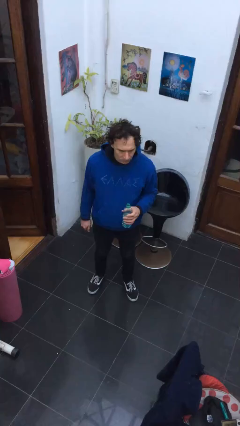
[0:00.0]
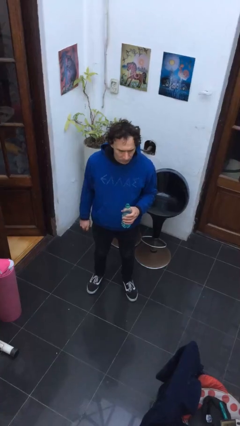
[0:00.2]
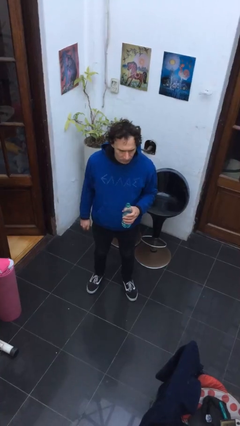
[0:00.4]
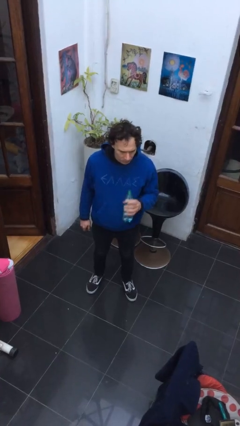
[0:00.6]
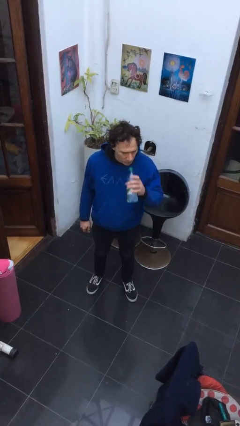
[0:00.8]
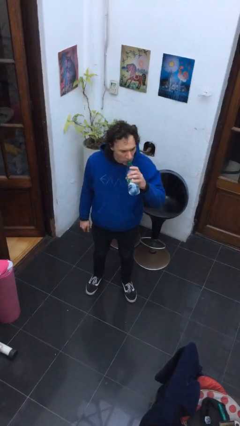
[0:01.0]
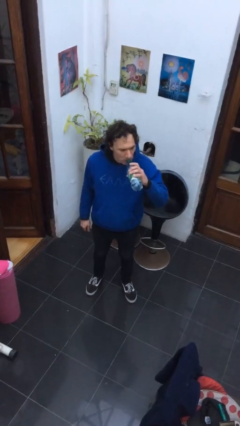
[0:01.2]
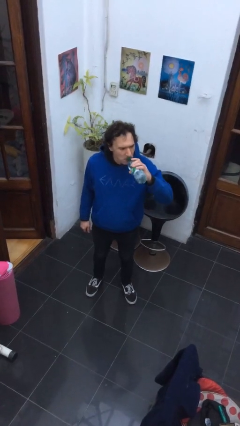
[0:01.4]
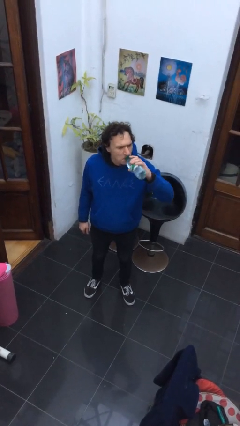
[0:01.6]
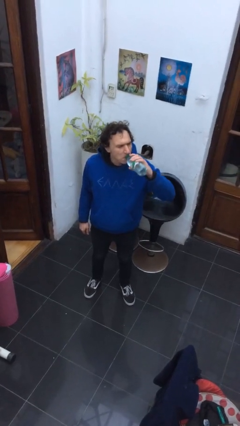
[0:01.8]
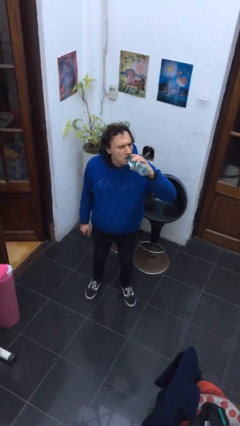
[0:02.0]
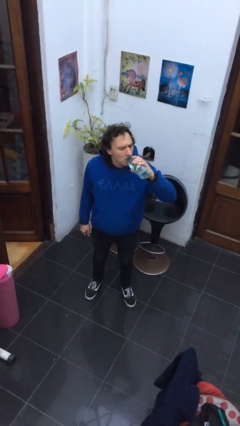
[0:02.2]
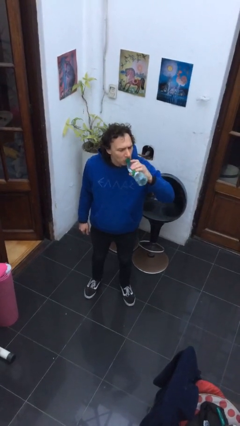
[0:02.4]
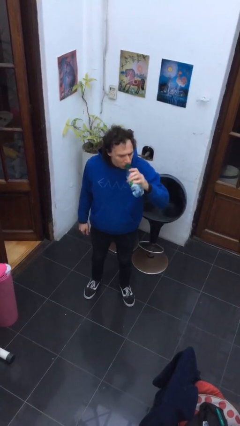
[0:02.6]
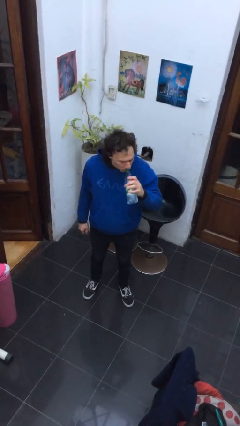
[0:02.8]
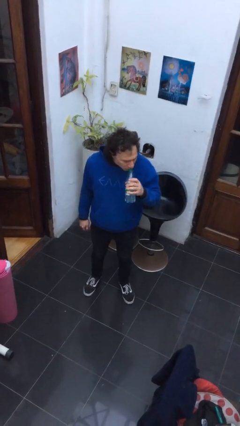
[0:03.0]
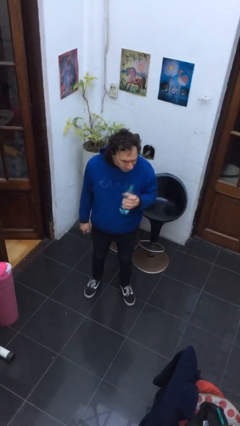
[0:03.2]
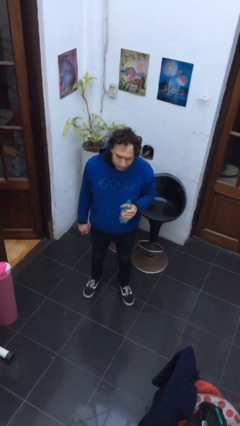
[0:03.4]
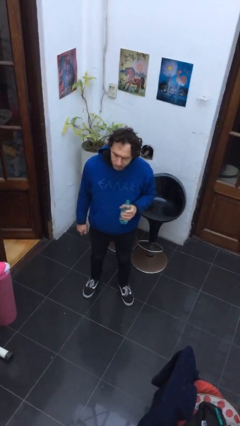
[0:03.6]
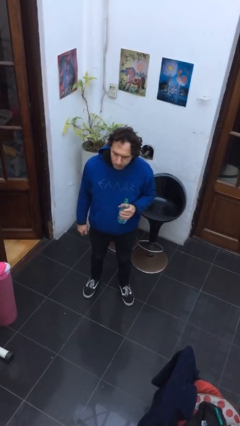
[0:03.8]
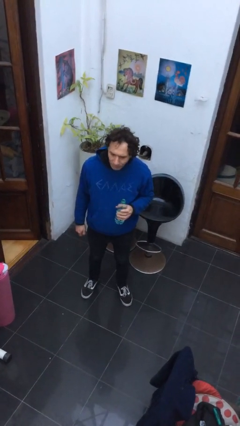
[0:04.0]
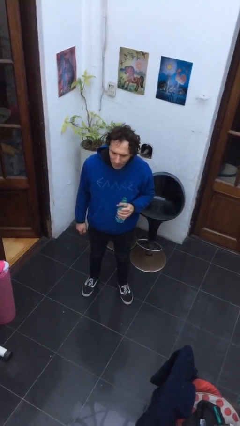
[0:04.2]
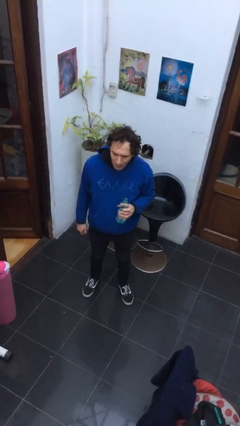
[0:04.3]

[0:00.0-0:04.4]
person drinks from bottle

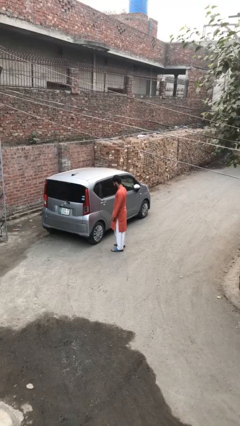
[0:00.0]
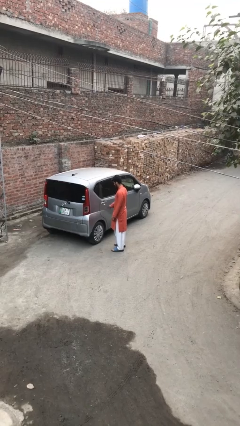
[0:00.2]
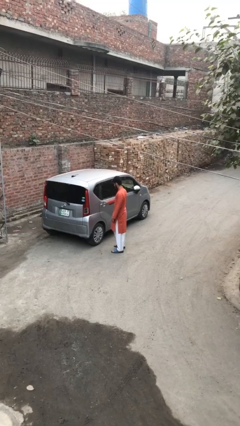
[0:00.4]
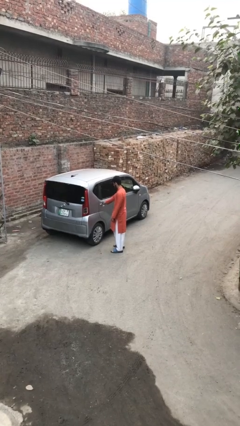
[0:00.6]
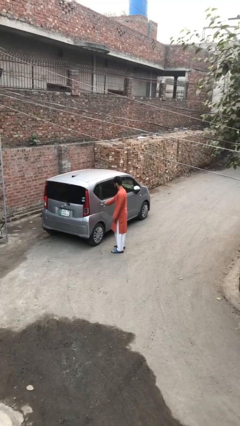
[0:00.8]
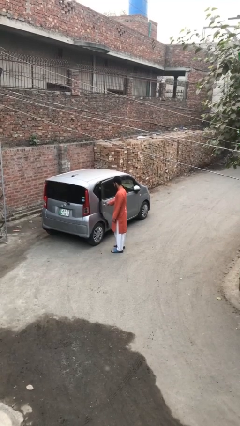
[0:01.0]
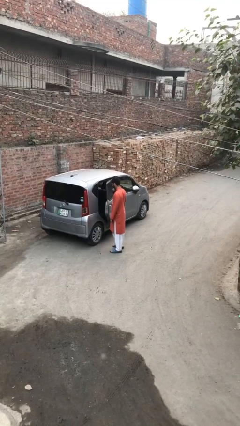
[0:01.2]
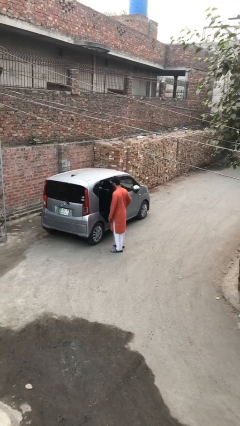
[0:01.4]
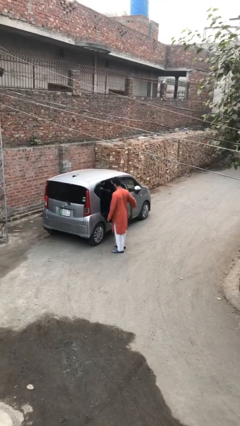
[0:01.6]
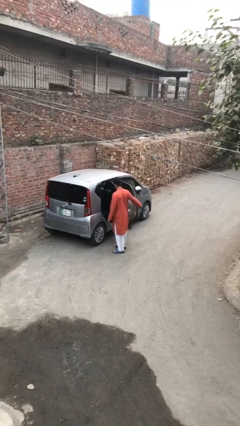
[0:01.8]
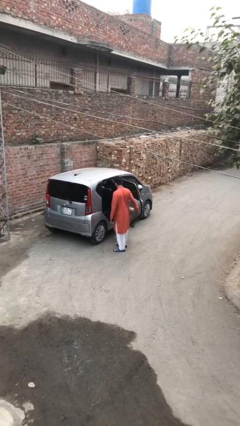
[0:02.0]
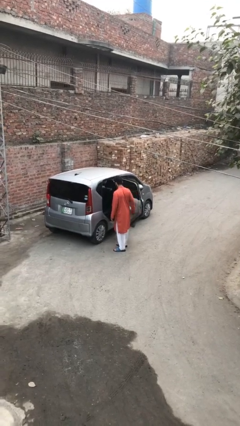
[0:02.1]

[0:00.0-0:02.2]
person opens car door

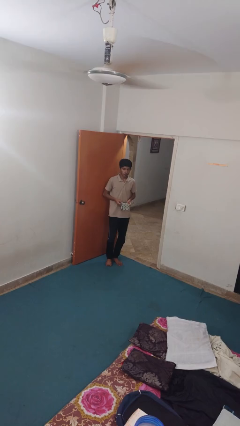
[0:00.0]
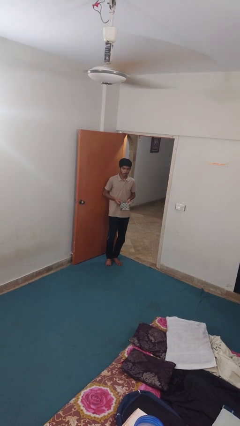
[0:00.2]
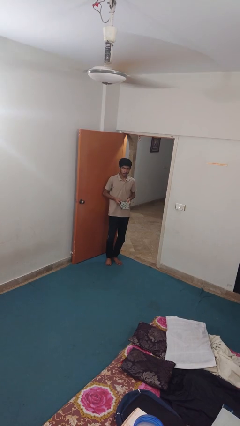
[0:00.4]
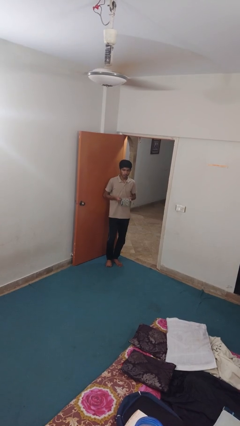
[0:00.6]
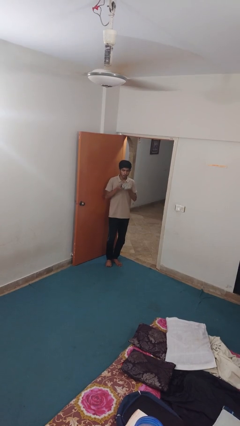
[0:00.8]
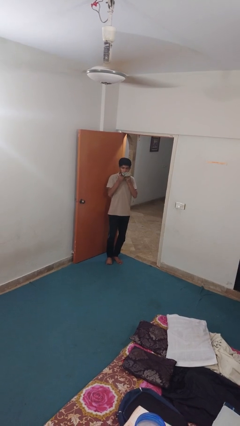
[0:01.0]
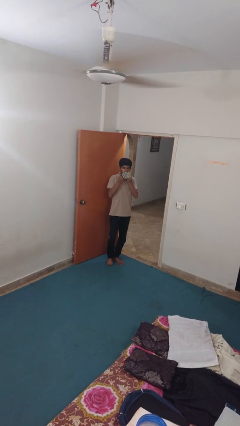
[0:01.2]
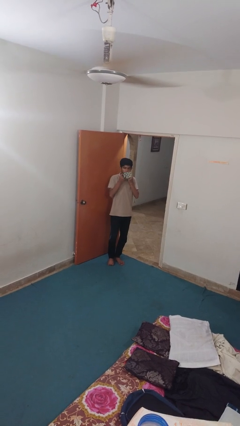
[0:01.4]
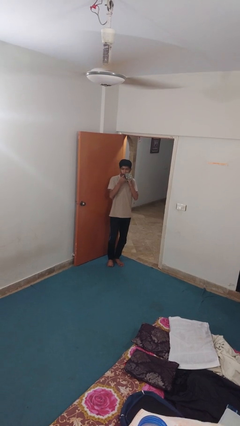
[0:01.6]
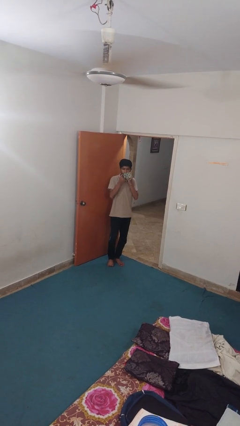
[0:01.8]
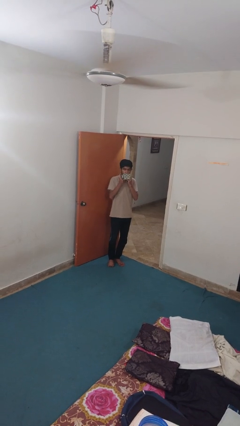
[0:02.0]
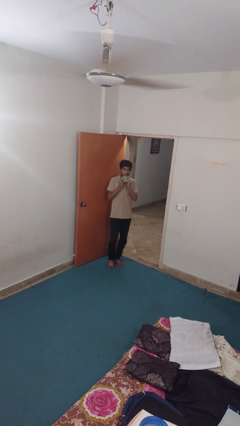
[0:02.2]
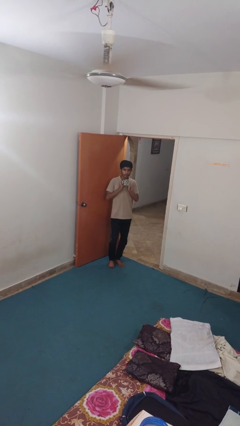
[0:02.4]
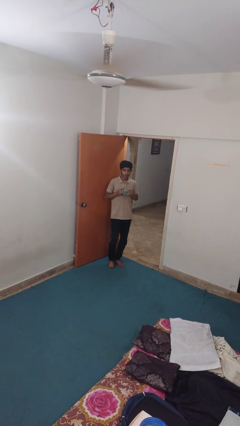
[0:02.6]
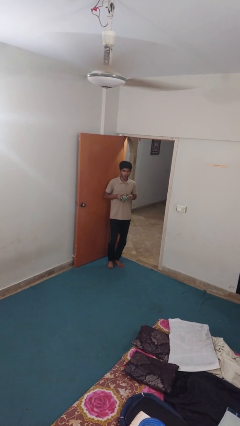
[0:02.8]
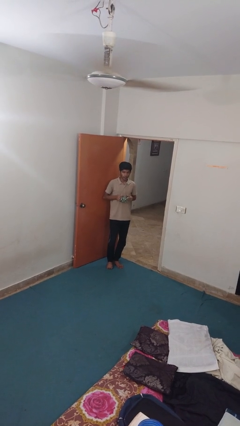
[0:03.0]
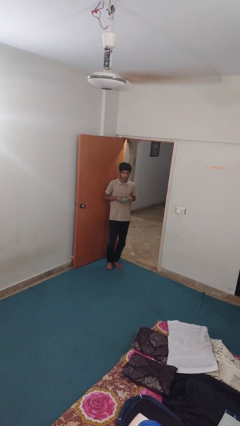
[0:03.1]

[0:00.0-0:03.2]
person wipes mouth with napkin

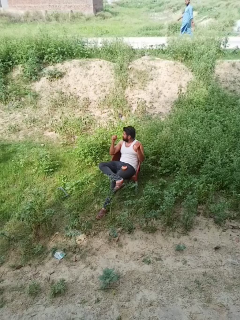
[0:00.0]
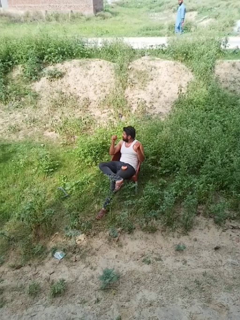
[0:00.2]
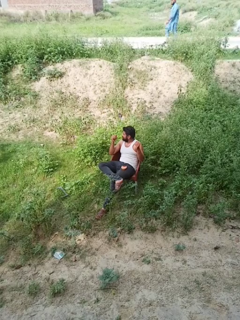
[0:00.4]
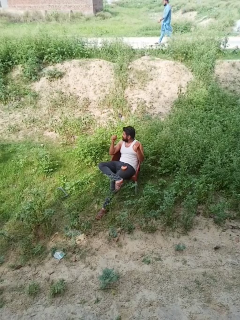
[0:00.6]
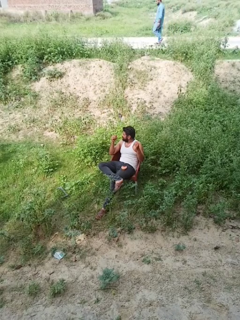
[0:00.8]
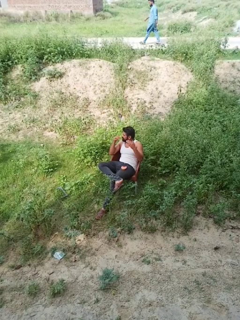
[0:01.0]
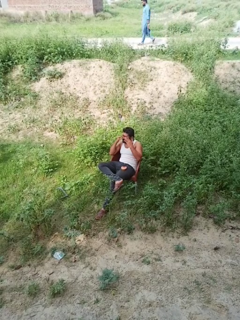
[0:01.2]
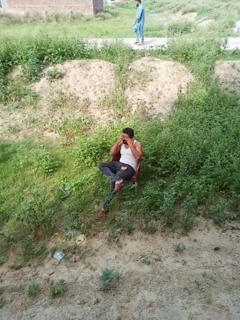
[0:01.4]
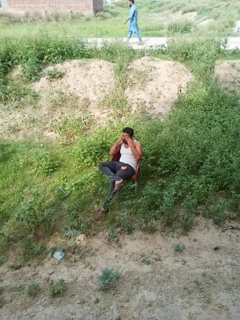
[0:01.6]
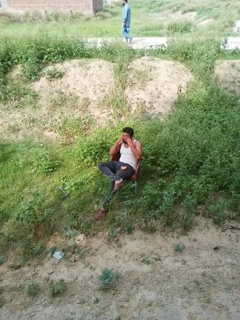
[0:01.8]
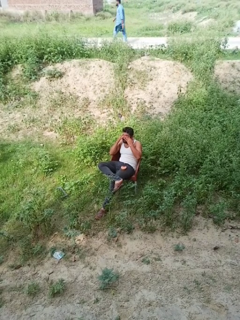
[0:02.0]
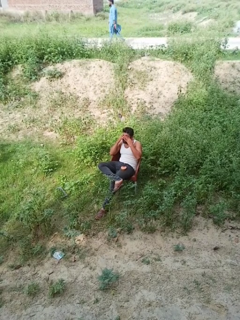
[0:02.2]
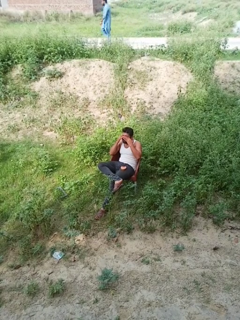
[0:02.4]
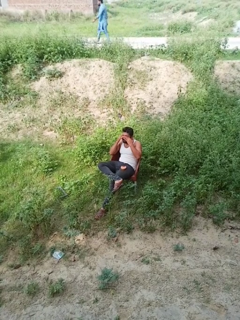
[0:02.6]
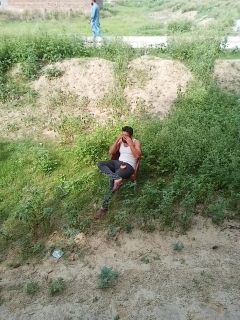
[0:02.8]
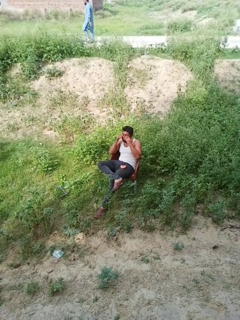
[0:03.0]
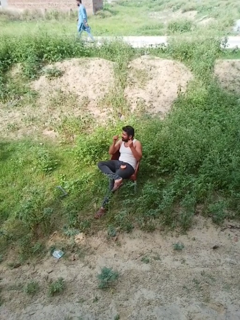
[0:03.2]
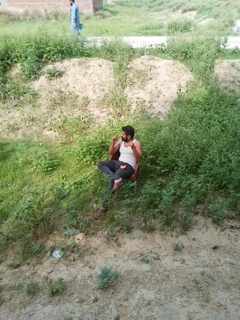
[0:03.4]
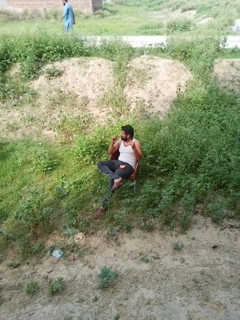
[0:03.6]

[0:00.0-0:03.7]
person rubs eyes

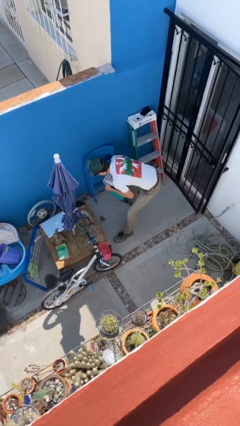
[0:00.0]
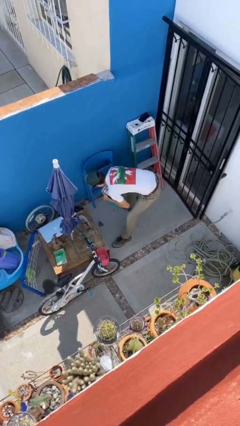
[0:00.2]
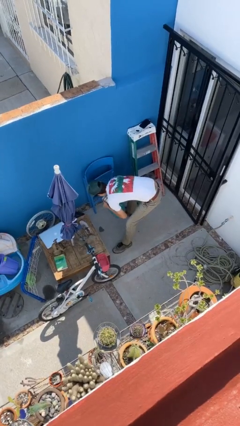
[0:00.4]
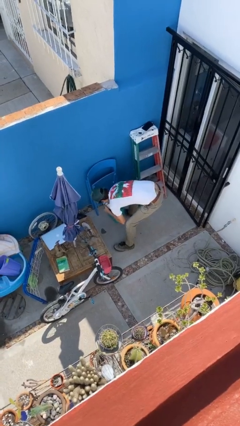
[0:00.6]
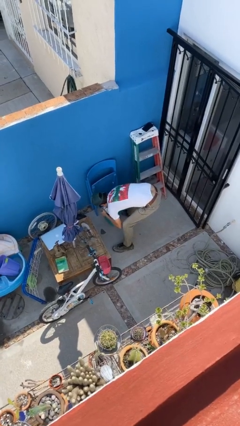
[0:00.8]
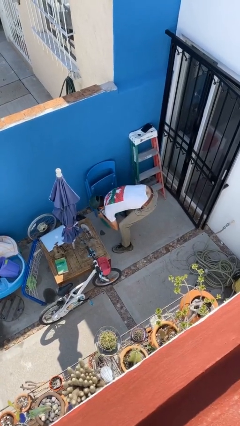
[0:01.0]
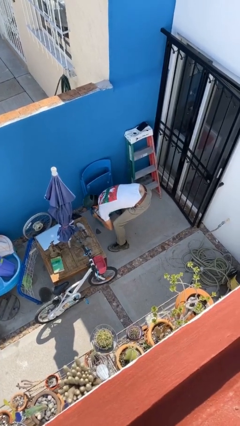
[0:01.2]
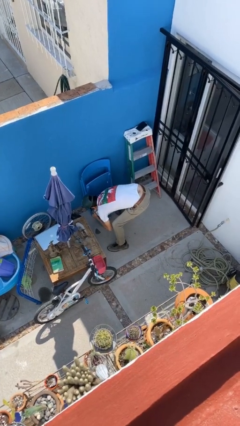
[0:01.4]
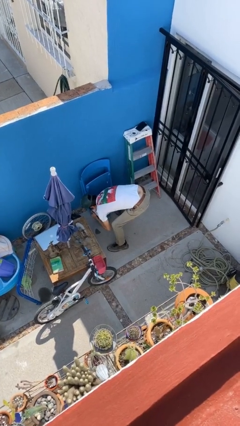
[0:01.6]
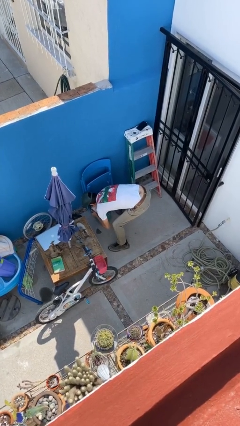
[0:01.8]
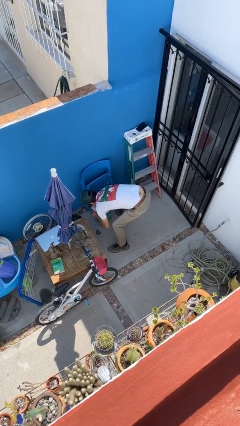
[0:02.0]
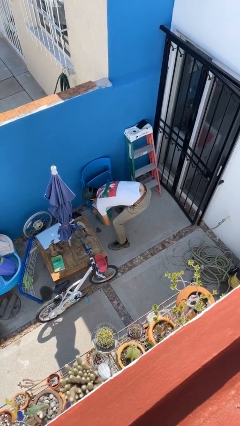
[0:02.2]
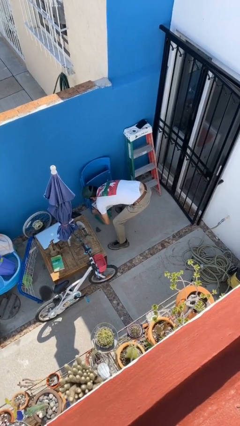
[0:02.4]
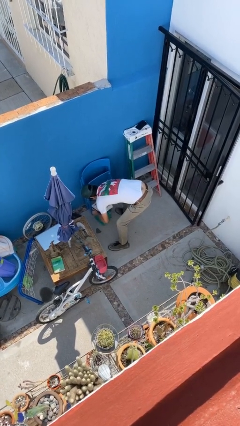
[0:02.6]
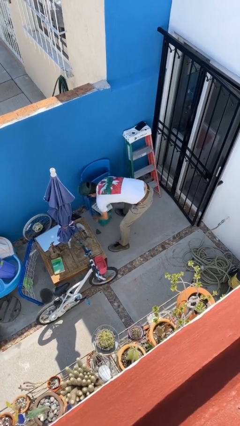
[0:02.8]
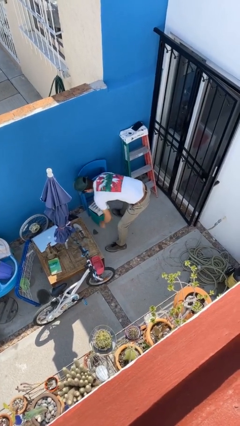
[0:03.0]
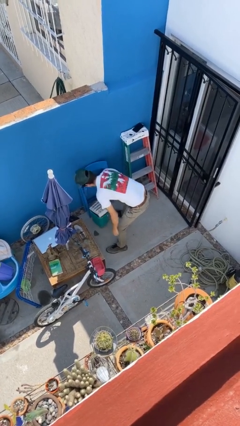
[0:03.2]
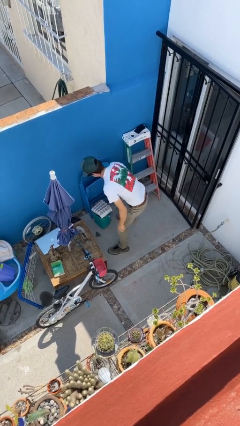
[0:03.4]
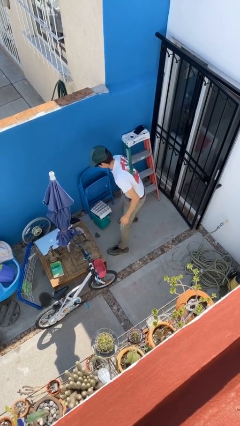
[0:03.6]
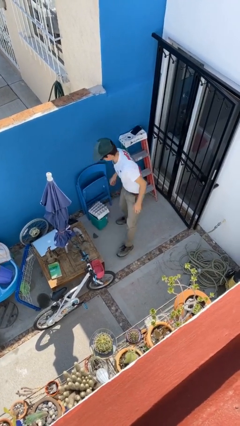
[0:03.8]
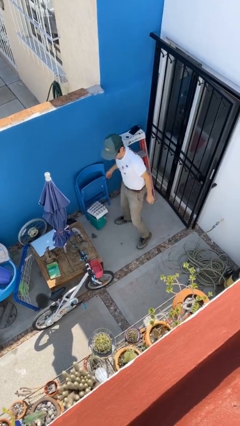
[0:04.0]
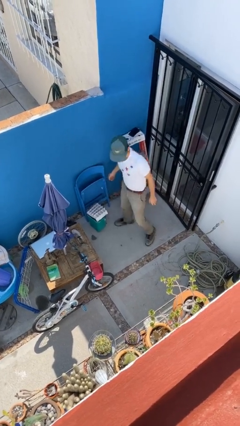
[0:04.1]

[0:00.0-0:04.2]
person puts down object on floor

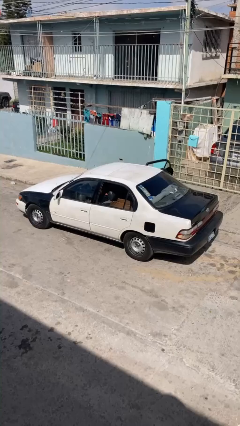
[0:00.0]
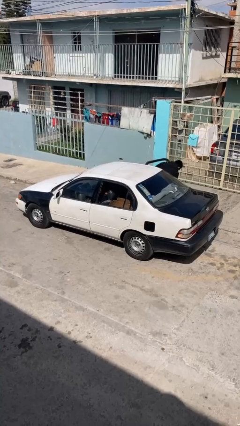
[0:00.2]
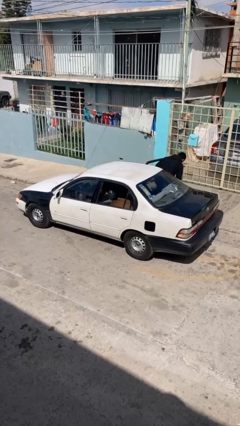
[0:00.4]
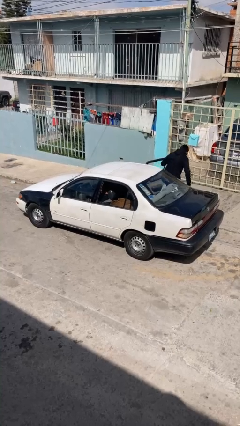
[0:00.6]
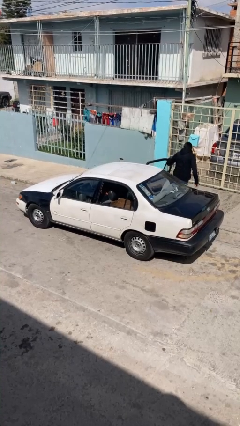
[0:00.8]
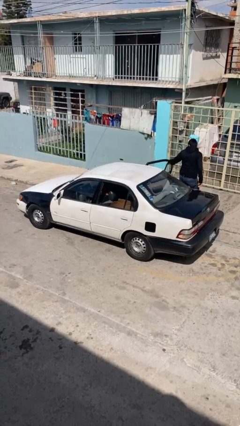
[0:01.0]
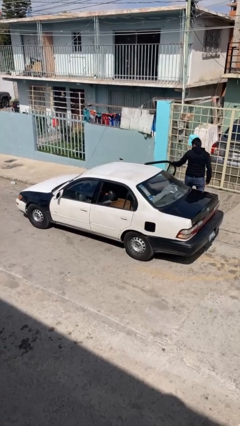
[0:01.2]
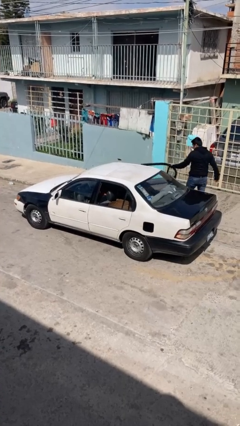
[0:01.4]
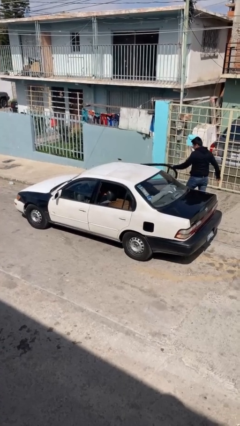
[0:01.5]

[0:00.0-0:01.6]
car drops off person
